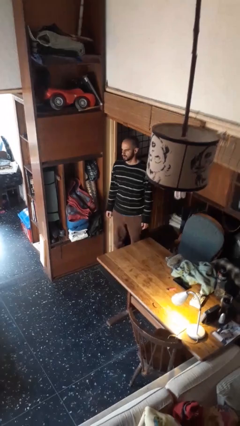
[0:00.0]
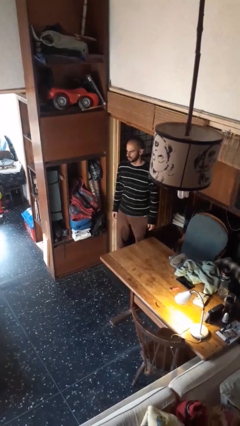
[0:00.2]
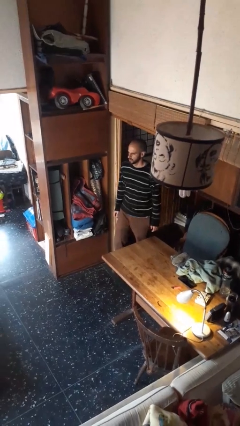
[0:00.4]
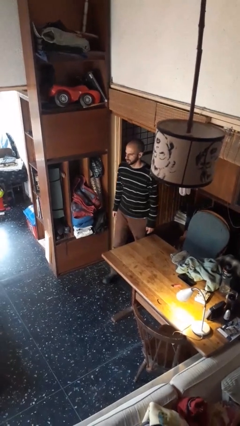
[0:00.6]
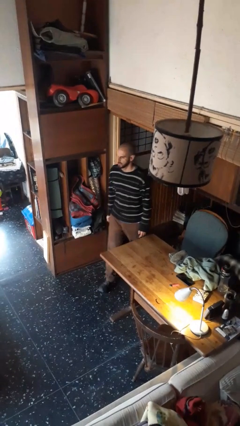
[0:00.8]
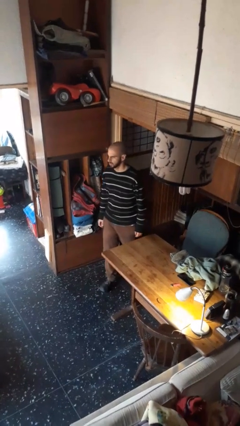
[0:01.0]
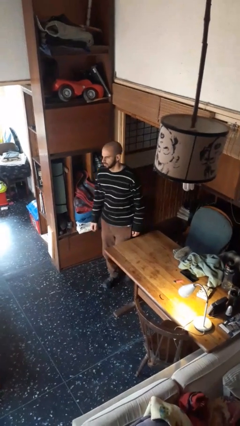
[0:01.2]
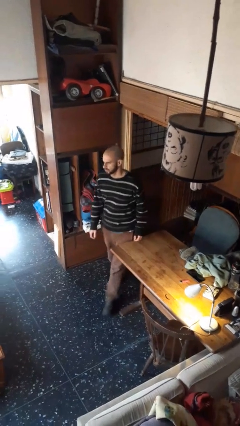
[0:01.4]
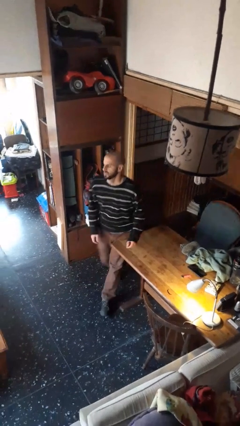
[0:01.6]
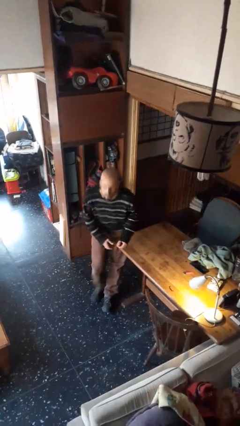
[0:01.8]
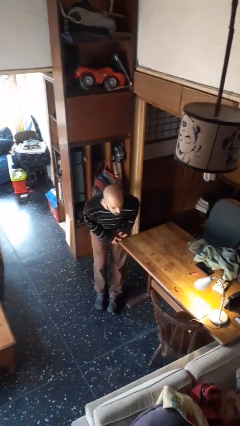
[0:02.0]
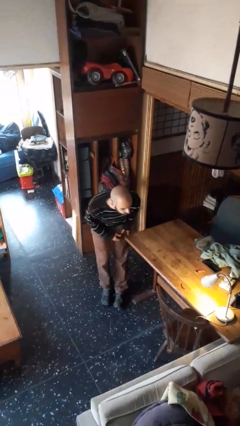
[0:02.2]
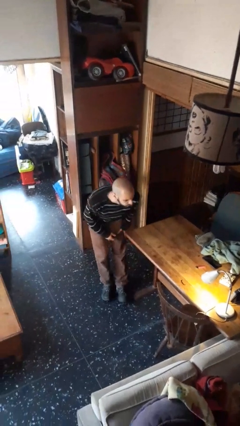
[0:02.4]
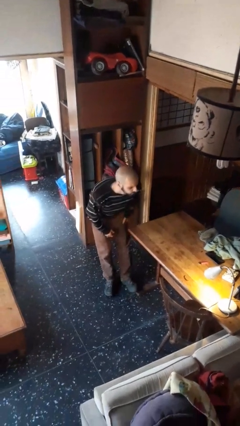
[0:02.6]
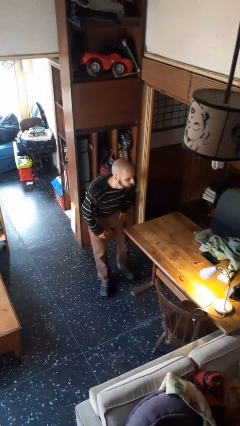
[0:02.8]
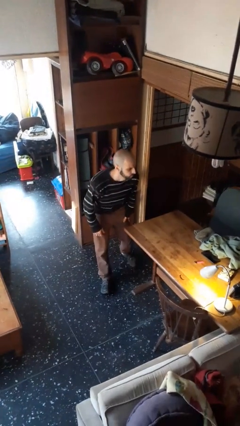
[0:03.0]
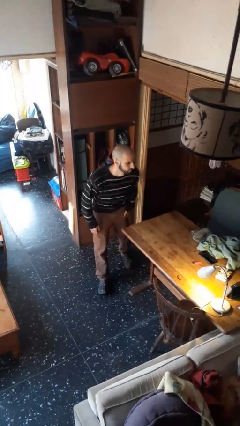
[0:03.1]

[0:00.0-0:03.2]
person bumps into table

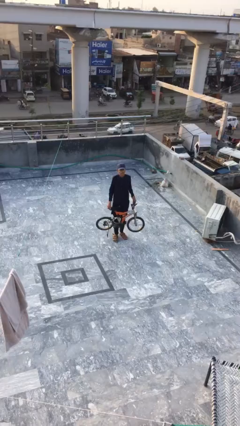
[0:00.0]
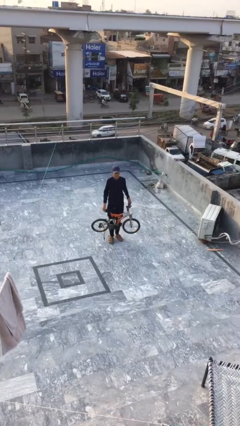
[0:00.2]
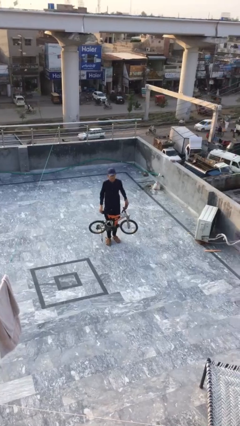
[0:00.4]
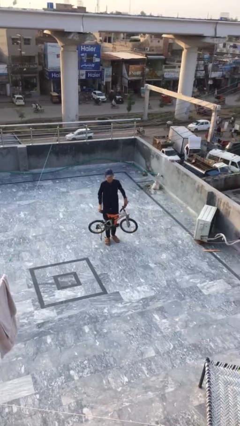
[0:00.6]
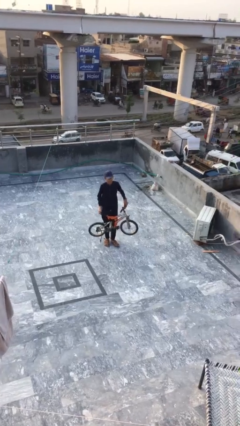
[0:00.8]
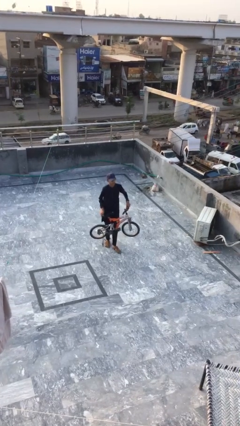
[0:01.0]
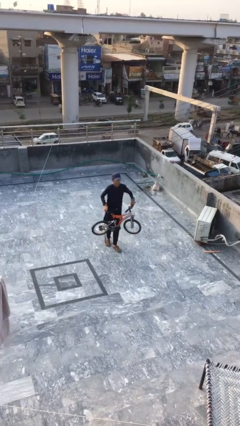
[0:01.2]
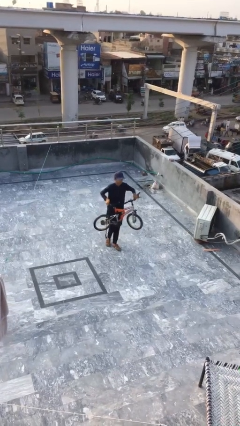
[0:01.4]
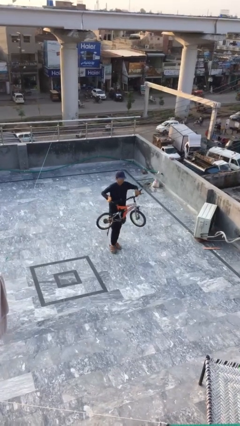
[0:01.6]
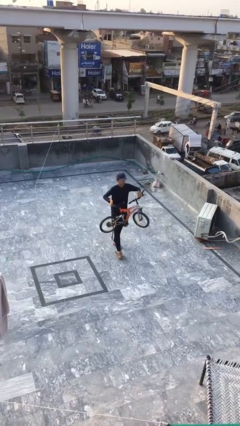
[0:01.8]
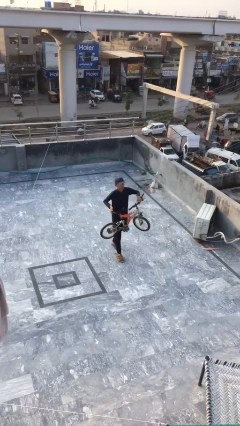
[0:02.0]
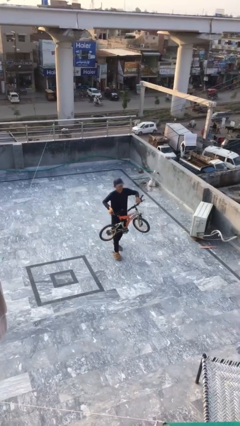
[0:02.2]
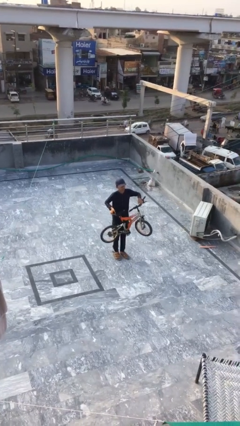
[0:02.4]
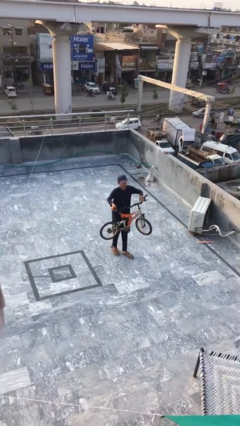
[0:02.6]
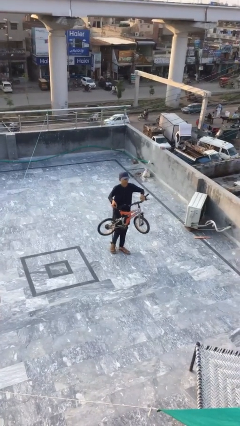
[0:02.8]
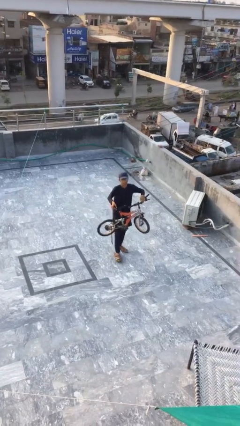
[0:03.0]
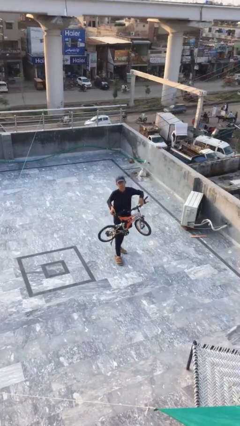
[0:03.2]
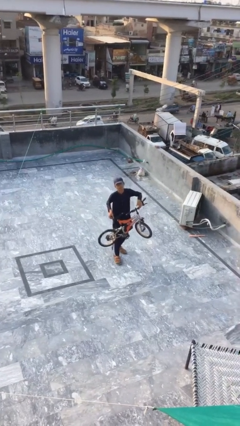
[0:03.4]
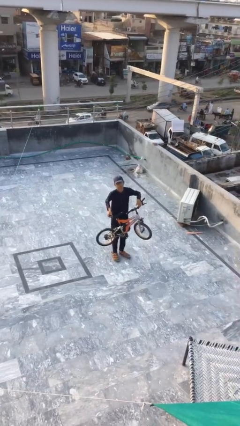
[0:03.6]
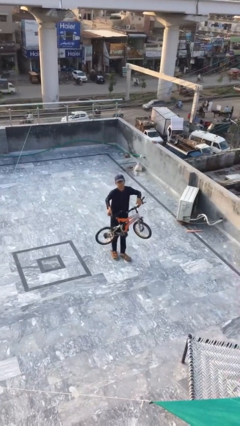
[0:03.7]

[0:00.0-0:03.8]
person carries heavy object

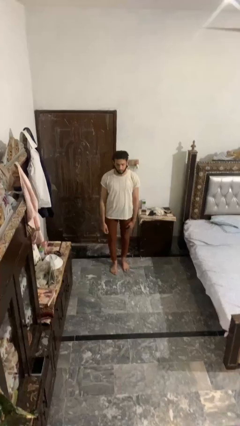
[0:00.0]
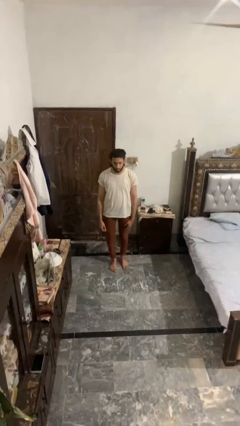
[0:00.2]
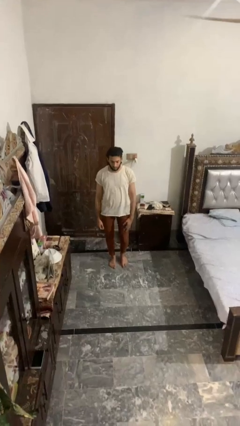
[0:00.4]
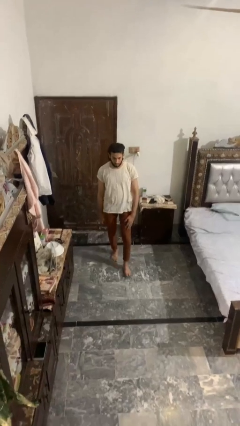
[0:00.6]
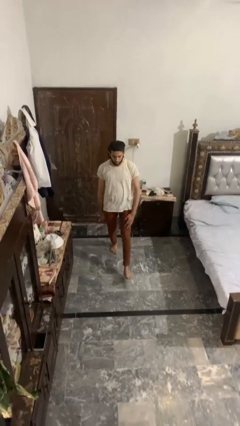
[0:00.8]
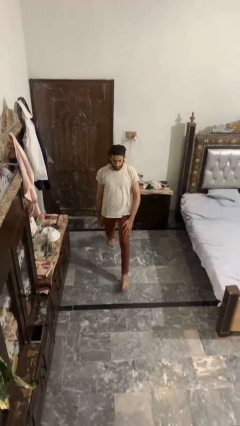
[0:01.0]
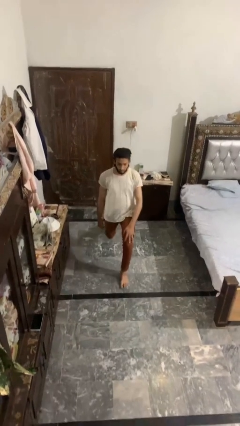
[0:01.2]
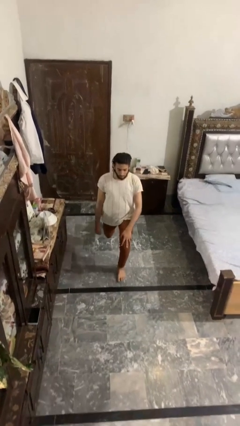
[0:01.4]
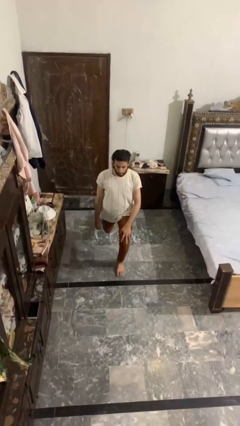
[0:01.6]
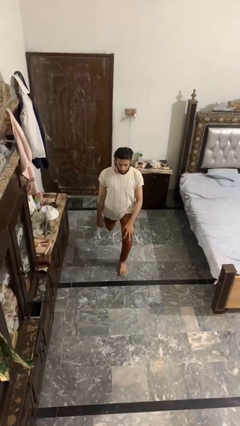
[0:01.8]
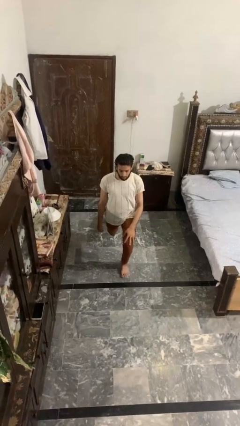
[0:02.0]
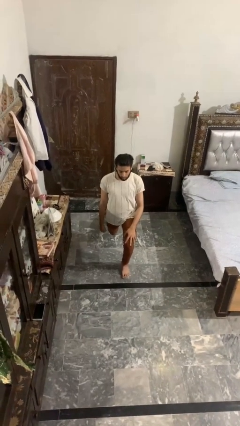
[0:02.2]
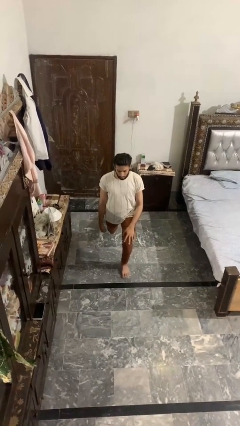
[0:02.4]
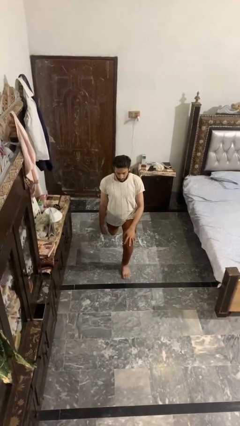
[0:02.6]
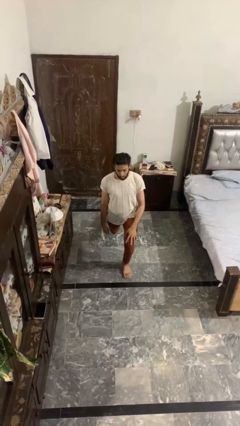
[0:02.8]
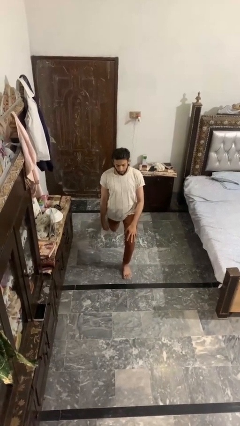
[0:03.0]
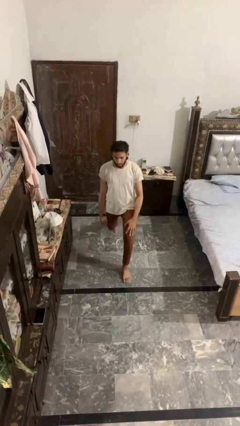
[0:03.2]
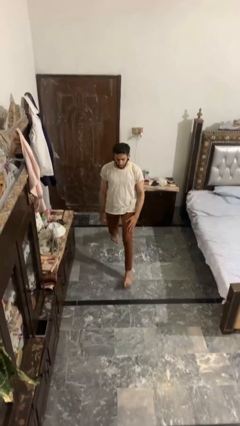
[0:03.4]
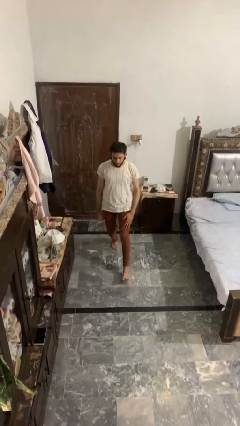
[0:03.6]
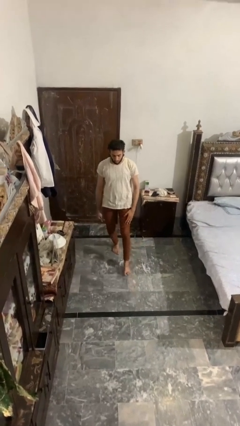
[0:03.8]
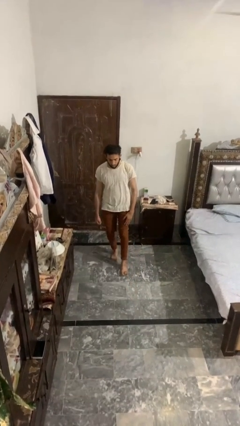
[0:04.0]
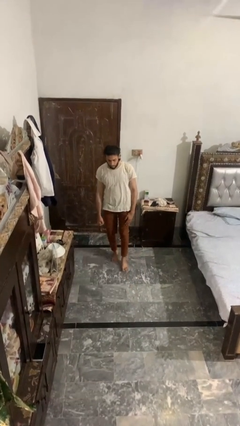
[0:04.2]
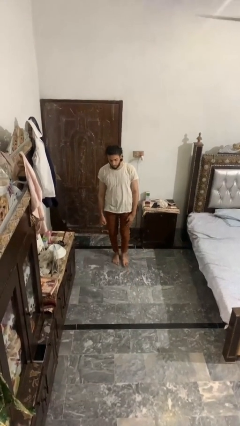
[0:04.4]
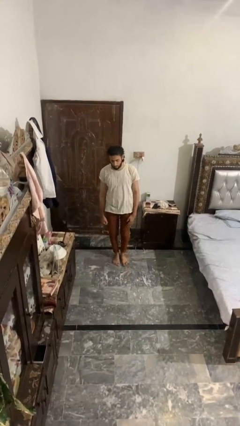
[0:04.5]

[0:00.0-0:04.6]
person exercises with lunges

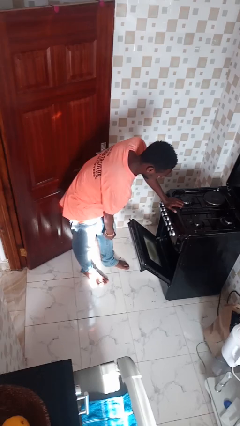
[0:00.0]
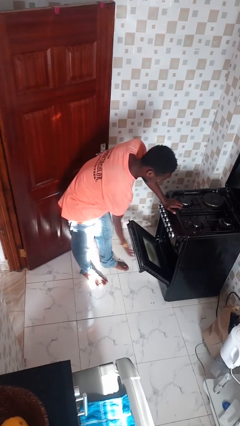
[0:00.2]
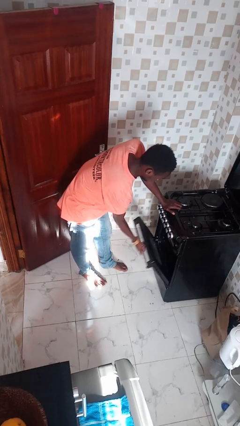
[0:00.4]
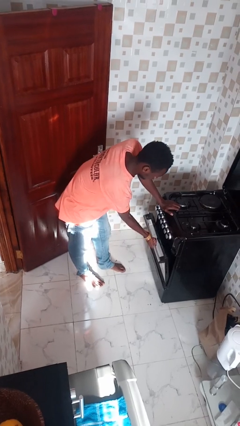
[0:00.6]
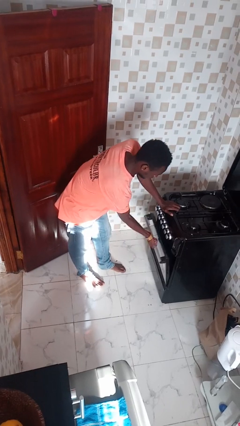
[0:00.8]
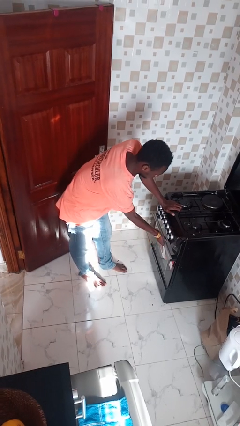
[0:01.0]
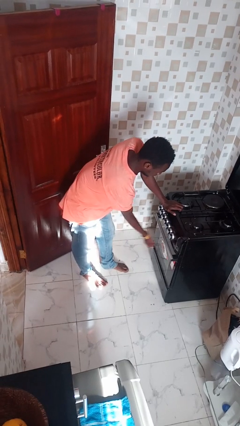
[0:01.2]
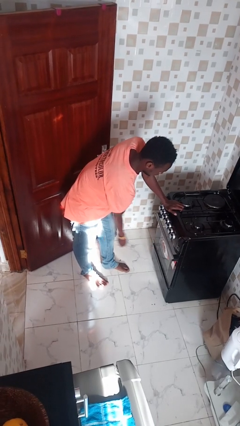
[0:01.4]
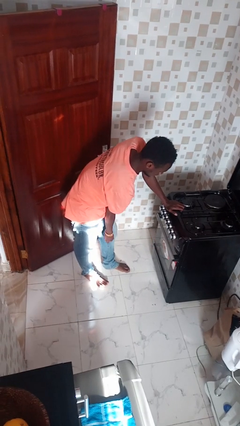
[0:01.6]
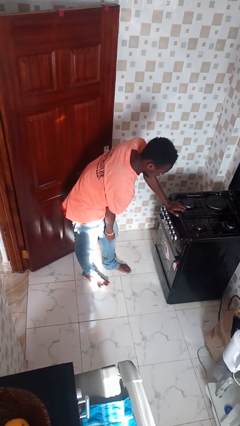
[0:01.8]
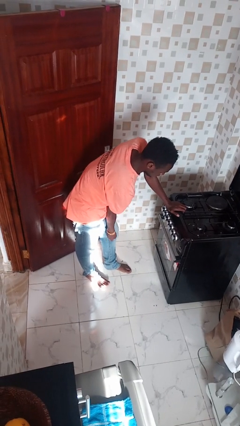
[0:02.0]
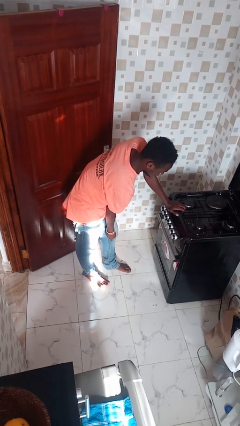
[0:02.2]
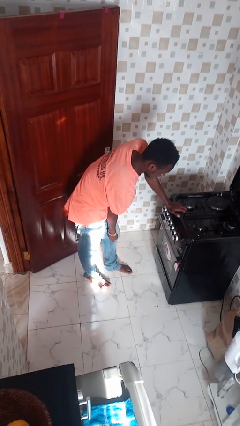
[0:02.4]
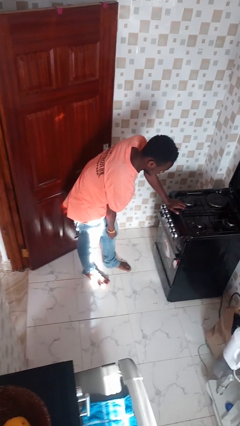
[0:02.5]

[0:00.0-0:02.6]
person closes oven door

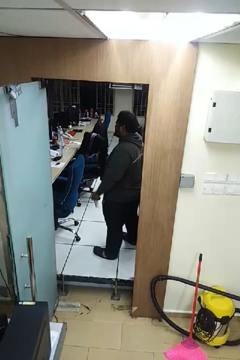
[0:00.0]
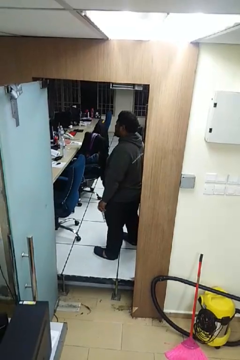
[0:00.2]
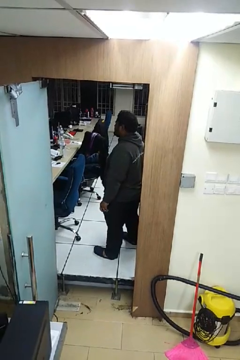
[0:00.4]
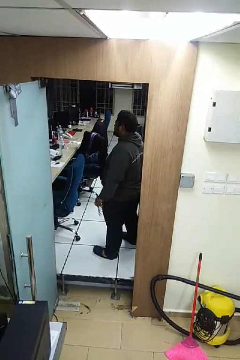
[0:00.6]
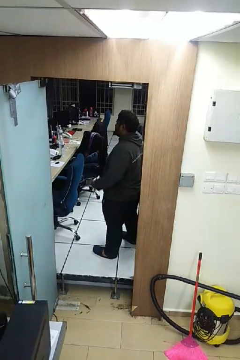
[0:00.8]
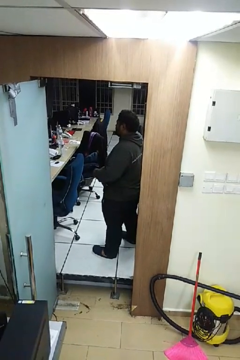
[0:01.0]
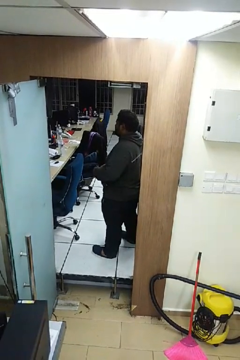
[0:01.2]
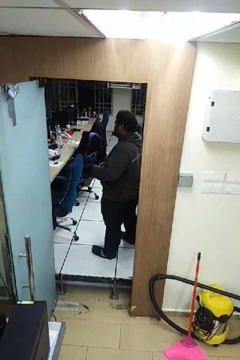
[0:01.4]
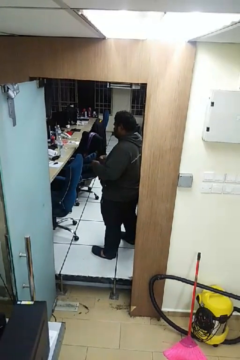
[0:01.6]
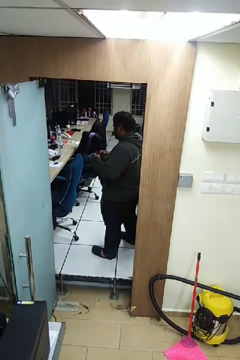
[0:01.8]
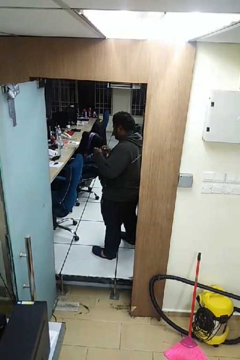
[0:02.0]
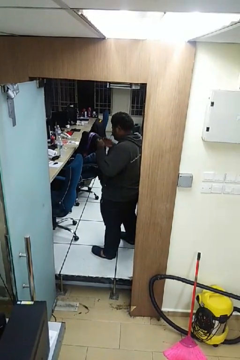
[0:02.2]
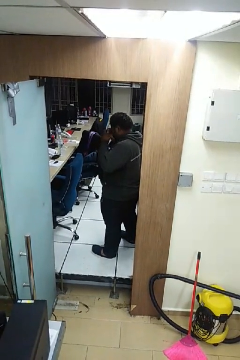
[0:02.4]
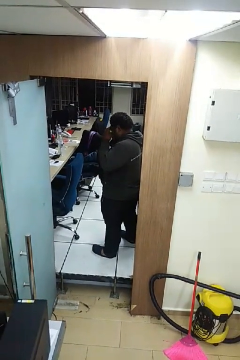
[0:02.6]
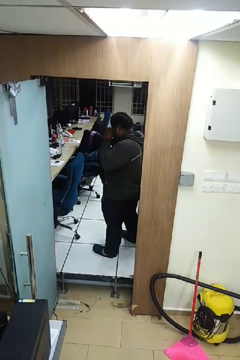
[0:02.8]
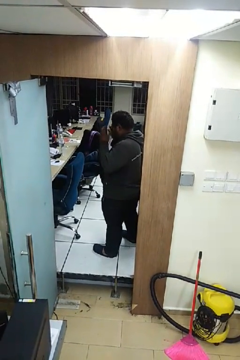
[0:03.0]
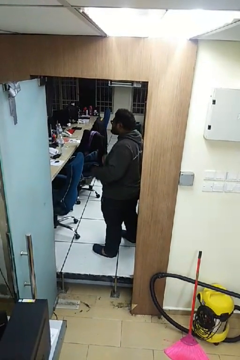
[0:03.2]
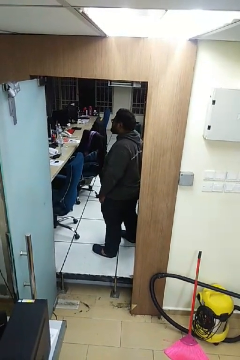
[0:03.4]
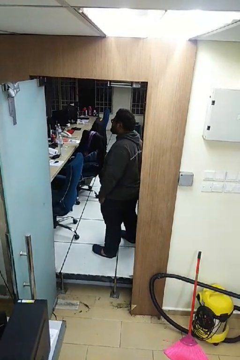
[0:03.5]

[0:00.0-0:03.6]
person puts on glasses
